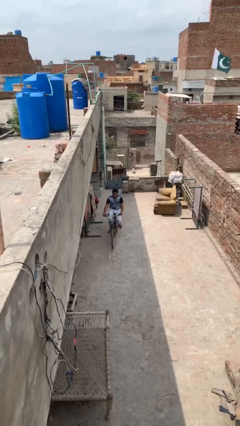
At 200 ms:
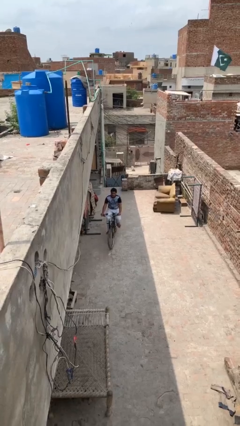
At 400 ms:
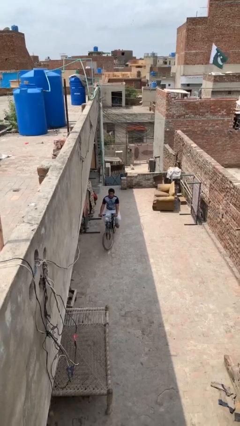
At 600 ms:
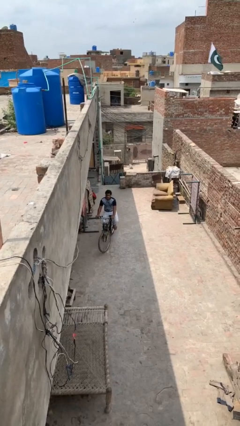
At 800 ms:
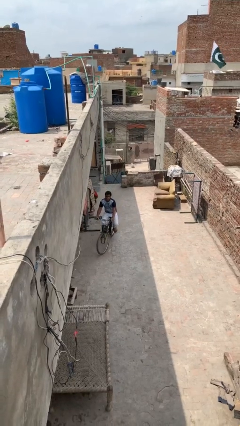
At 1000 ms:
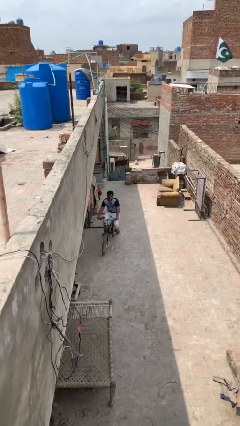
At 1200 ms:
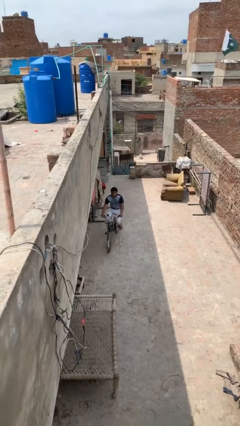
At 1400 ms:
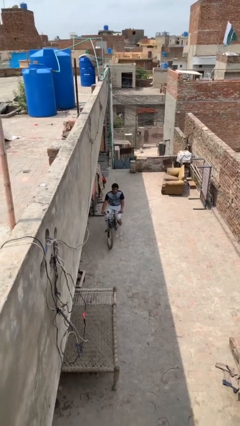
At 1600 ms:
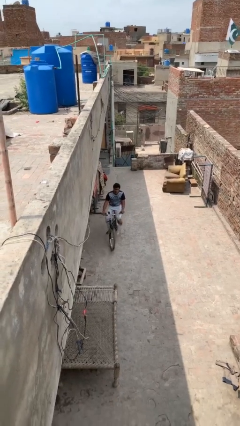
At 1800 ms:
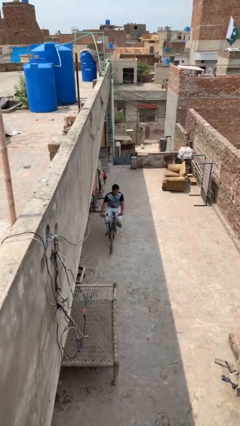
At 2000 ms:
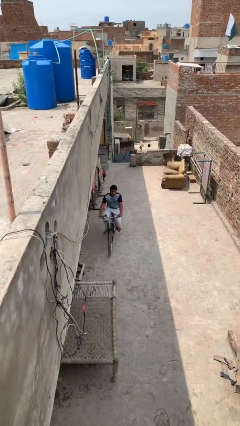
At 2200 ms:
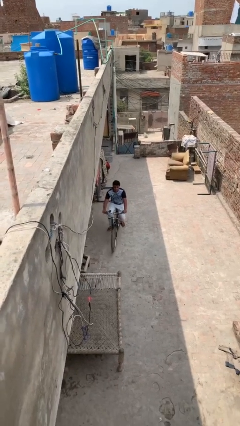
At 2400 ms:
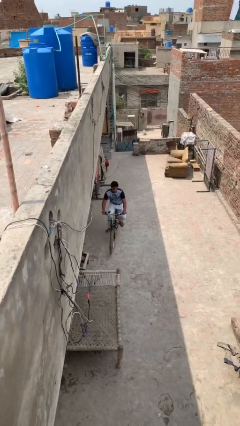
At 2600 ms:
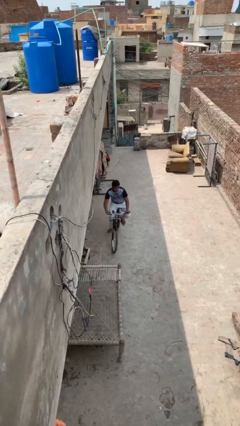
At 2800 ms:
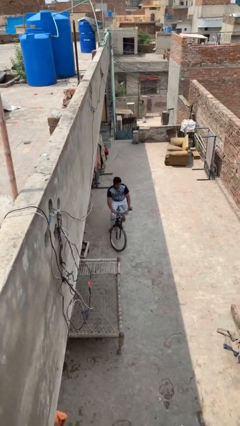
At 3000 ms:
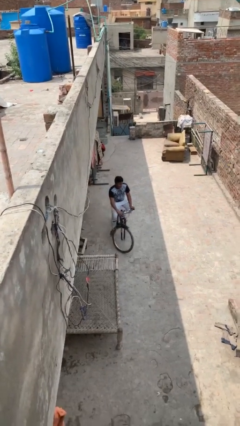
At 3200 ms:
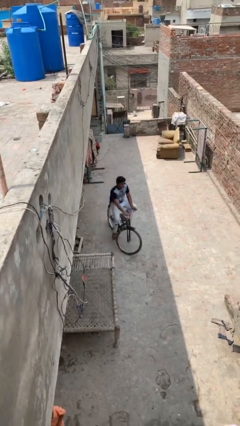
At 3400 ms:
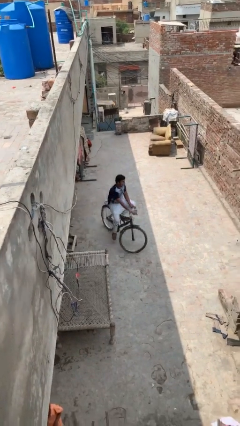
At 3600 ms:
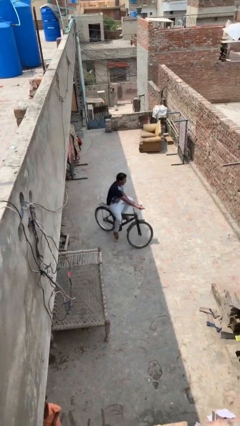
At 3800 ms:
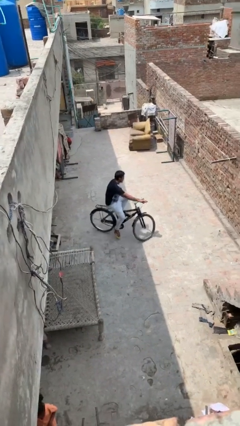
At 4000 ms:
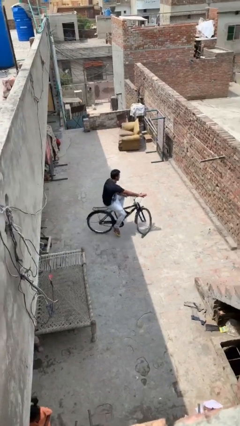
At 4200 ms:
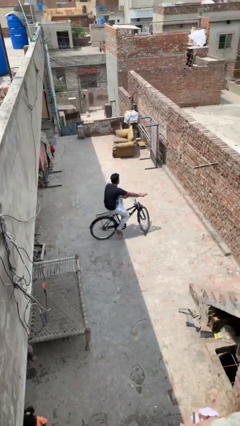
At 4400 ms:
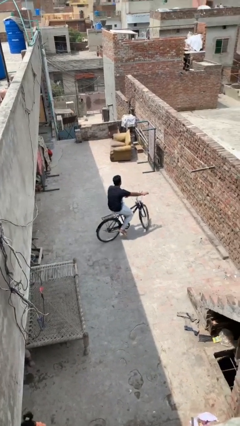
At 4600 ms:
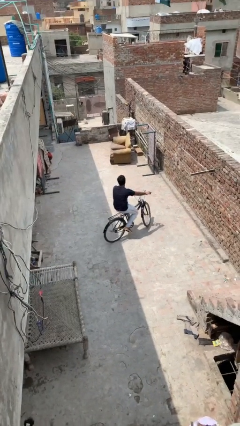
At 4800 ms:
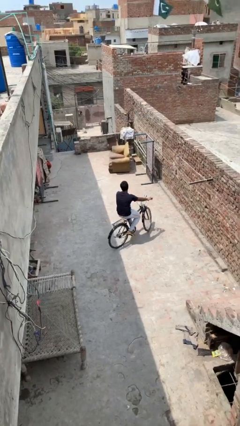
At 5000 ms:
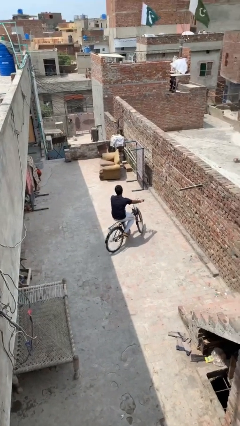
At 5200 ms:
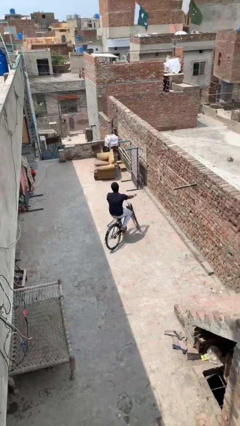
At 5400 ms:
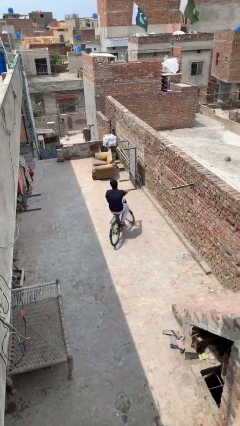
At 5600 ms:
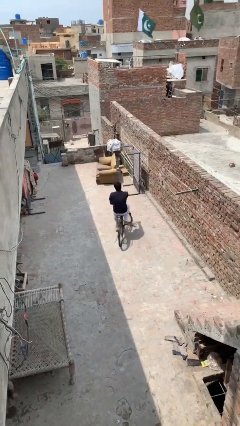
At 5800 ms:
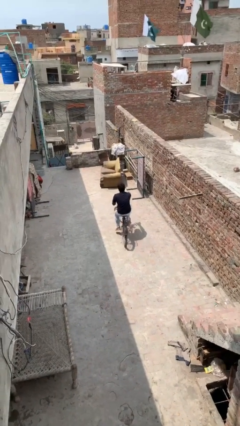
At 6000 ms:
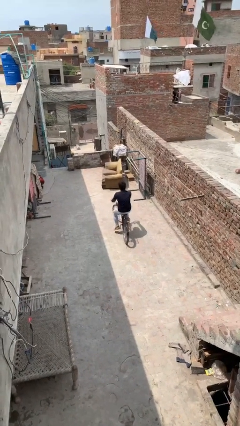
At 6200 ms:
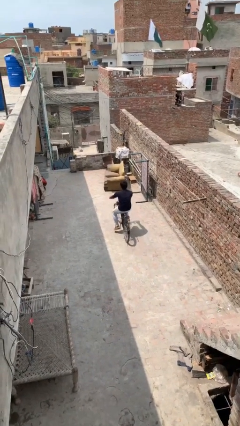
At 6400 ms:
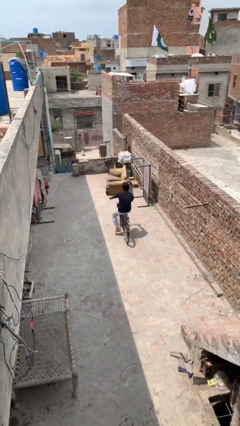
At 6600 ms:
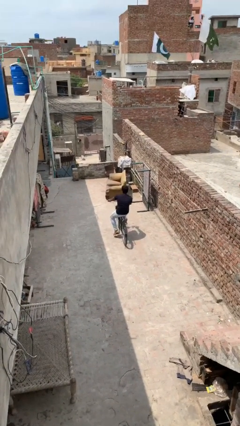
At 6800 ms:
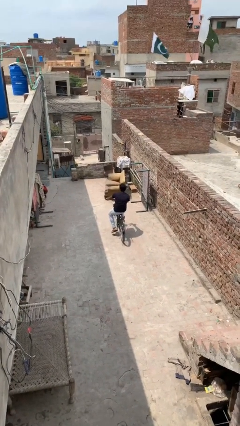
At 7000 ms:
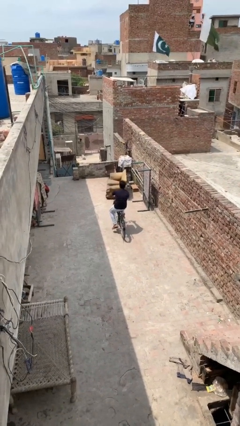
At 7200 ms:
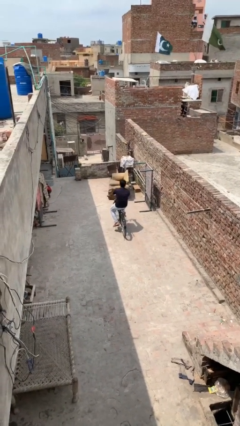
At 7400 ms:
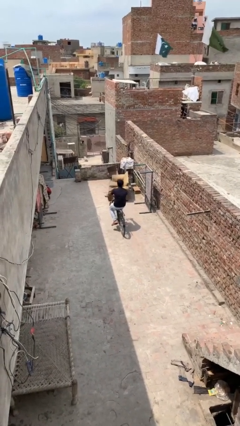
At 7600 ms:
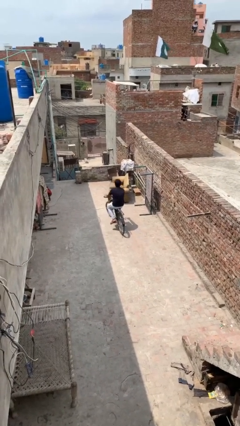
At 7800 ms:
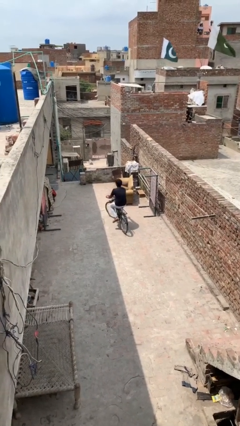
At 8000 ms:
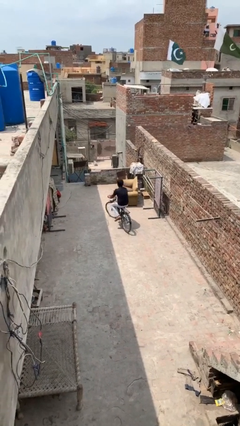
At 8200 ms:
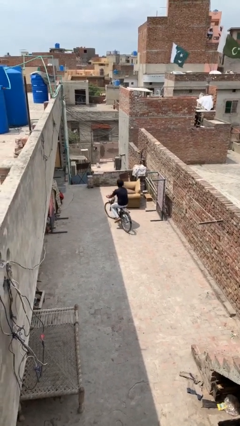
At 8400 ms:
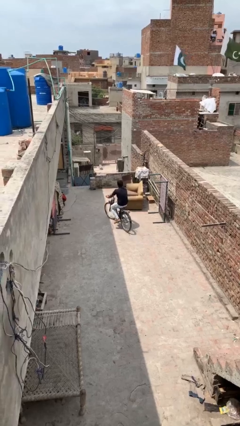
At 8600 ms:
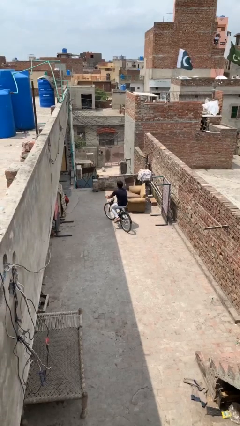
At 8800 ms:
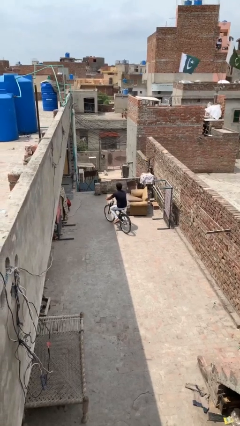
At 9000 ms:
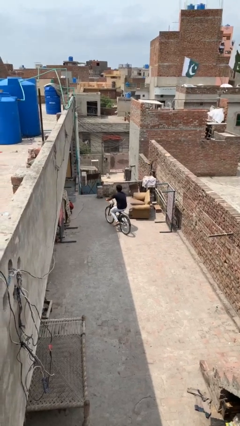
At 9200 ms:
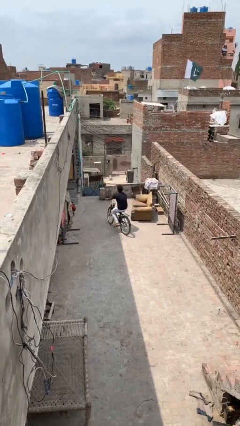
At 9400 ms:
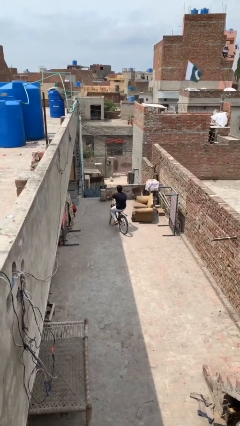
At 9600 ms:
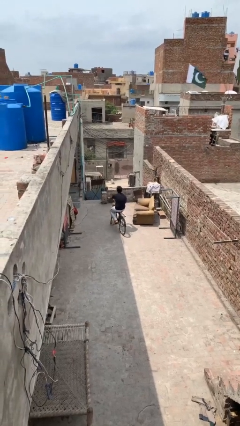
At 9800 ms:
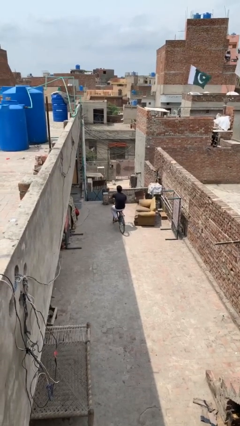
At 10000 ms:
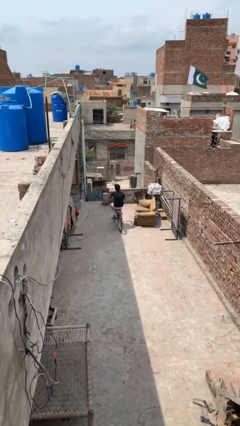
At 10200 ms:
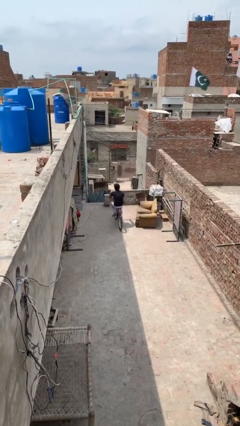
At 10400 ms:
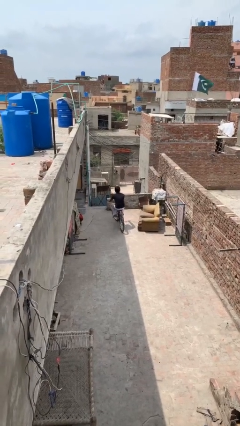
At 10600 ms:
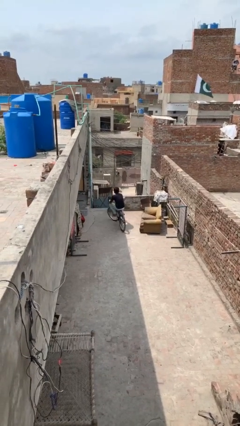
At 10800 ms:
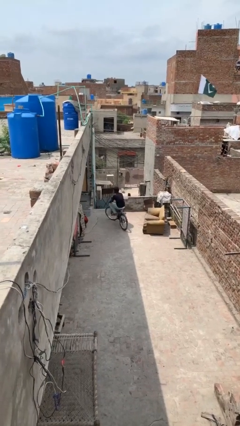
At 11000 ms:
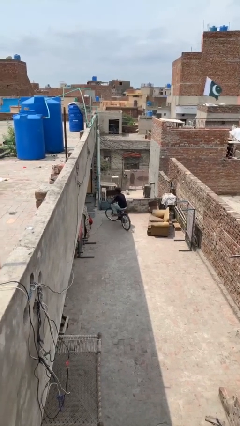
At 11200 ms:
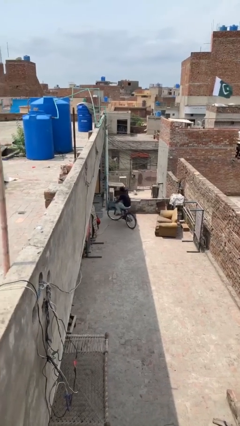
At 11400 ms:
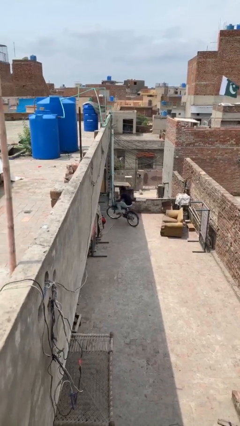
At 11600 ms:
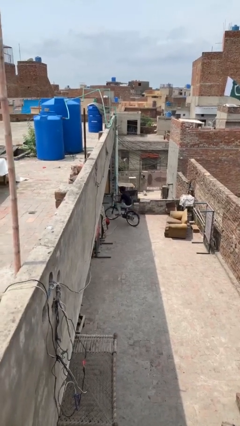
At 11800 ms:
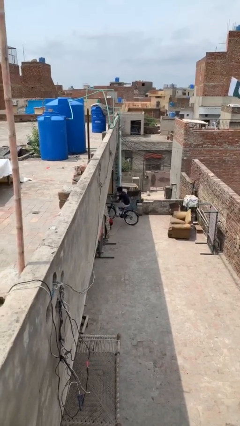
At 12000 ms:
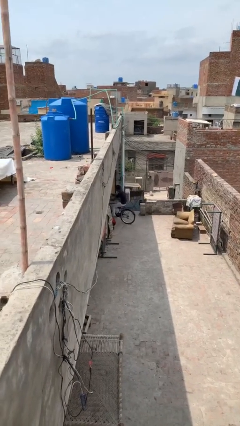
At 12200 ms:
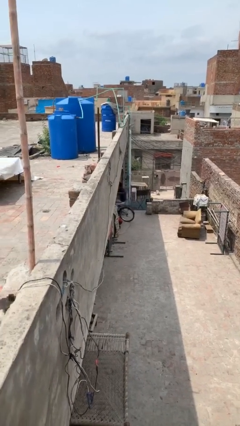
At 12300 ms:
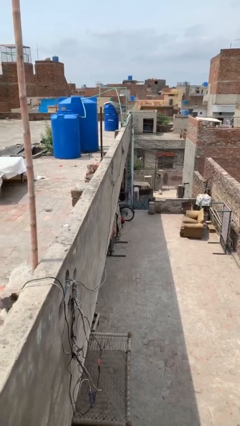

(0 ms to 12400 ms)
person rides bicycle

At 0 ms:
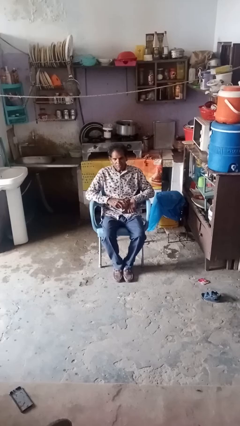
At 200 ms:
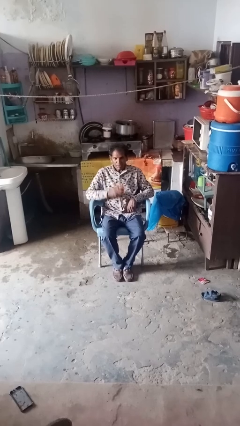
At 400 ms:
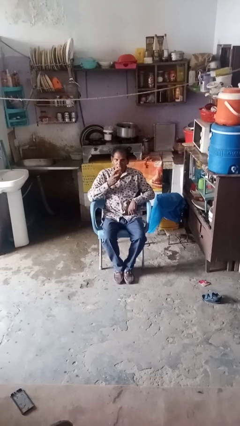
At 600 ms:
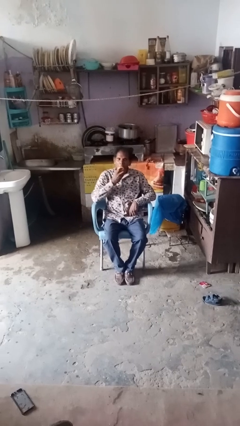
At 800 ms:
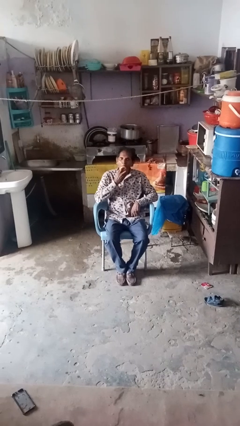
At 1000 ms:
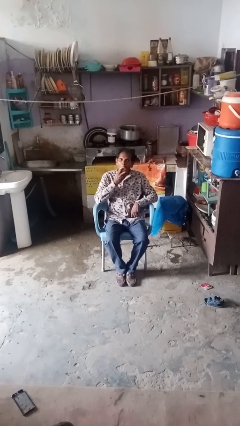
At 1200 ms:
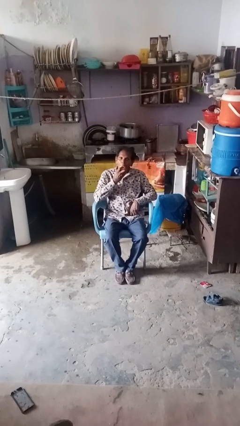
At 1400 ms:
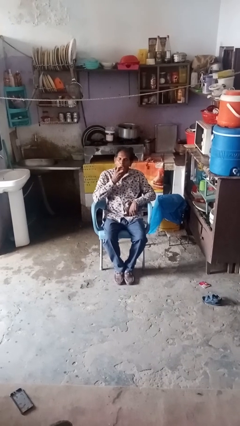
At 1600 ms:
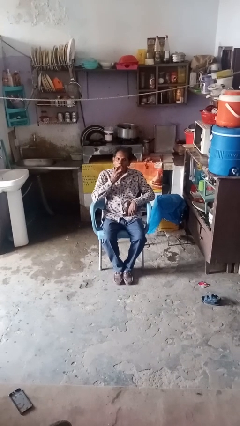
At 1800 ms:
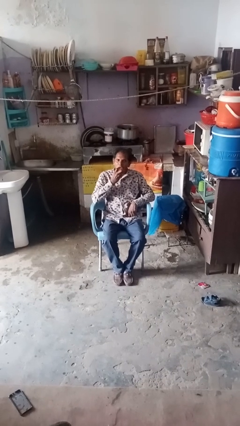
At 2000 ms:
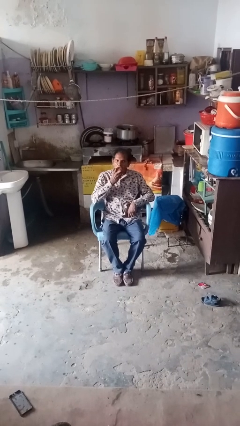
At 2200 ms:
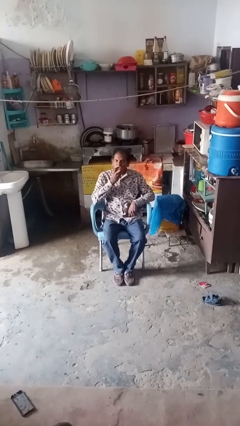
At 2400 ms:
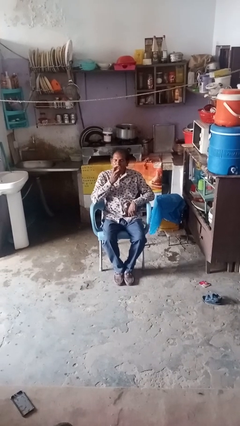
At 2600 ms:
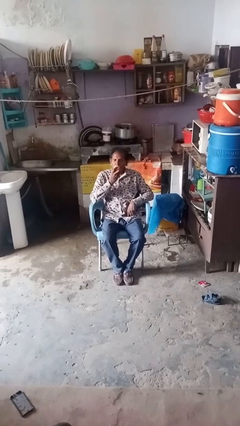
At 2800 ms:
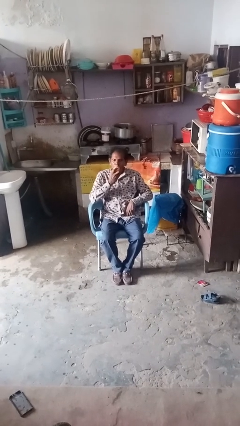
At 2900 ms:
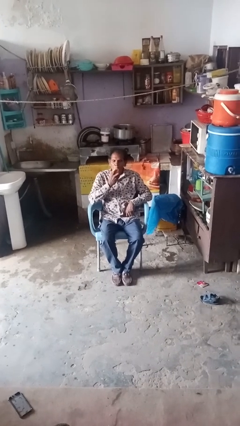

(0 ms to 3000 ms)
person eats apple

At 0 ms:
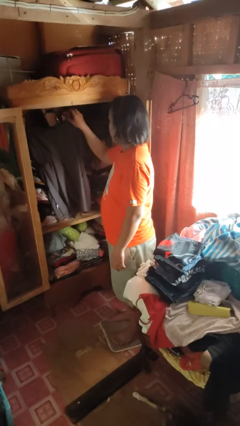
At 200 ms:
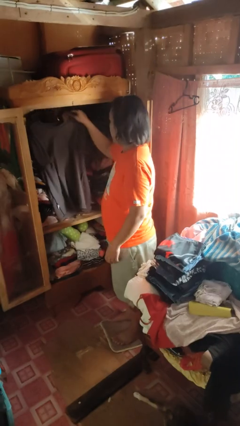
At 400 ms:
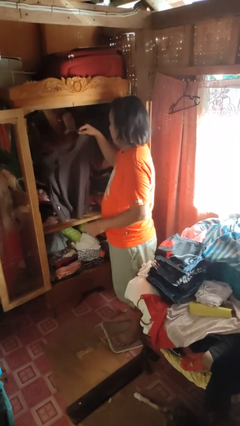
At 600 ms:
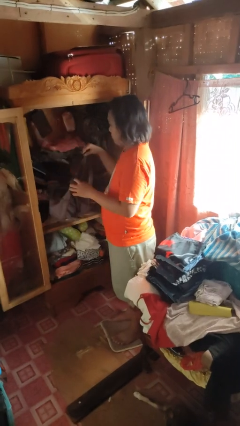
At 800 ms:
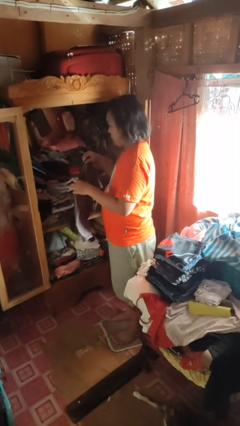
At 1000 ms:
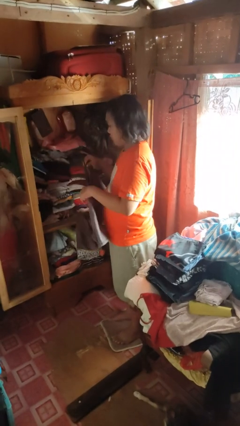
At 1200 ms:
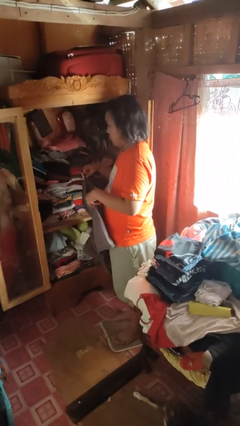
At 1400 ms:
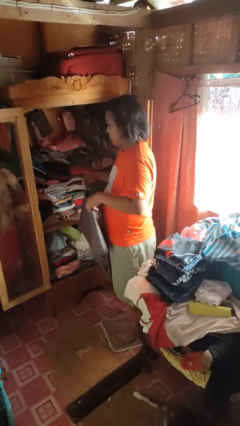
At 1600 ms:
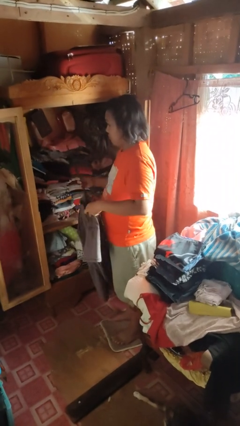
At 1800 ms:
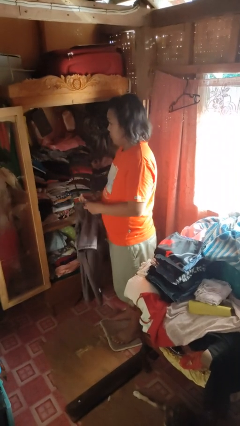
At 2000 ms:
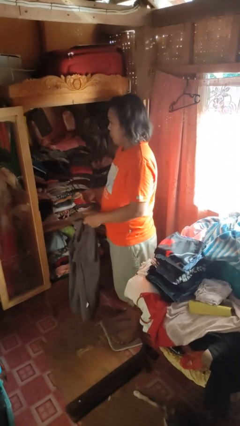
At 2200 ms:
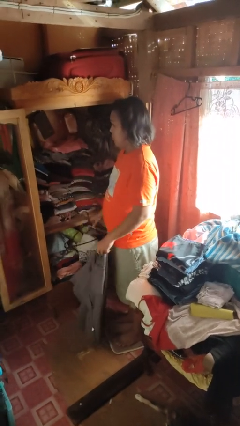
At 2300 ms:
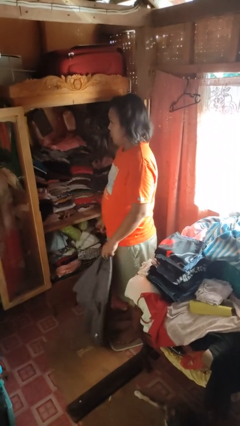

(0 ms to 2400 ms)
person takes clothes from closet
